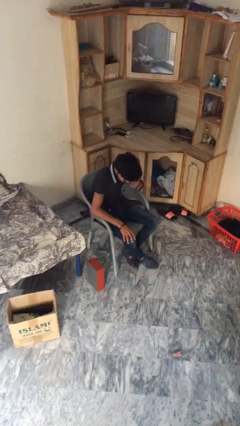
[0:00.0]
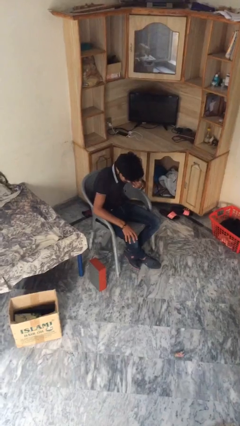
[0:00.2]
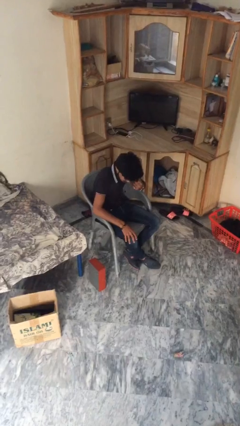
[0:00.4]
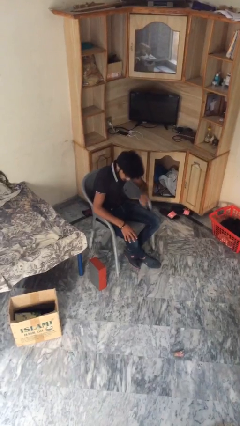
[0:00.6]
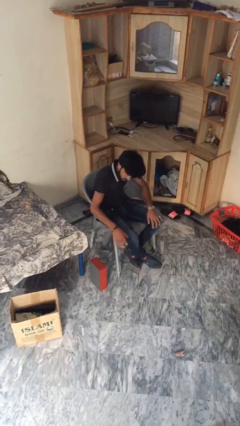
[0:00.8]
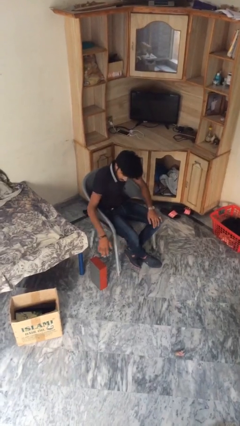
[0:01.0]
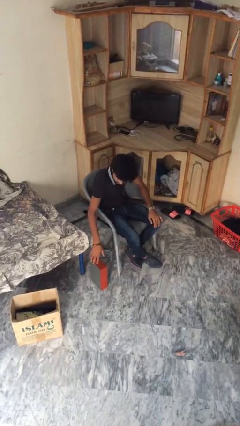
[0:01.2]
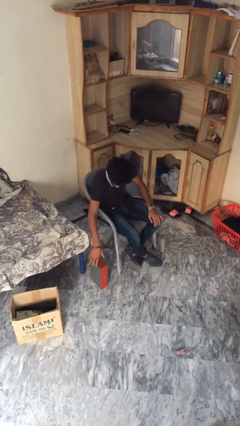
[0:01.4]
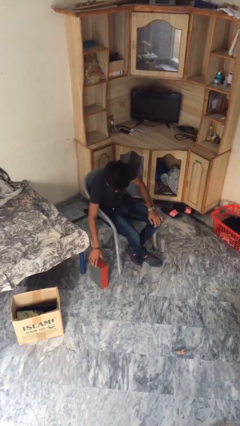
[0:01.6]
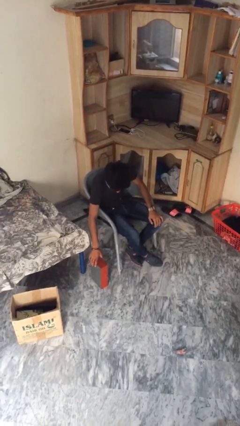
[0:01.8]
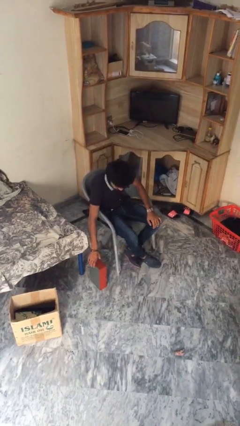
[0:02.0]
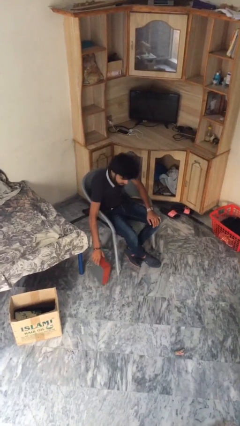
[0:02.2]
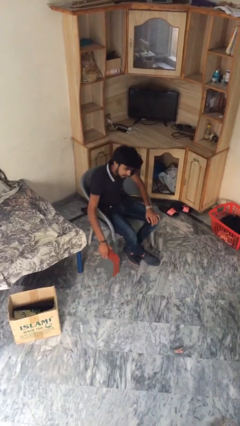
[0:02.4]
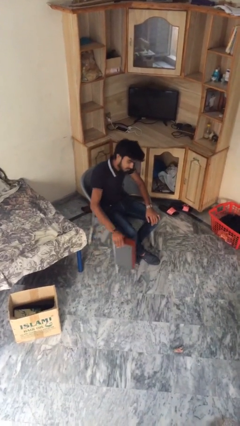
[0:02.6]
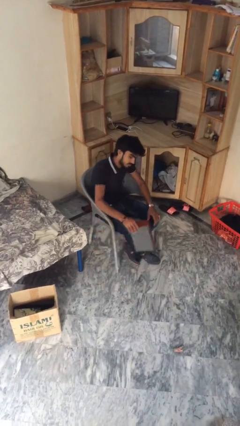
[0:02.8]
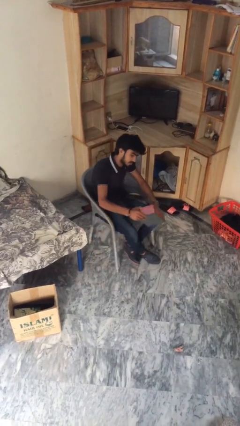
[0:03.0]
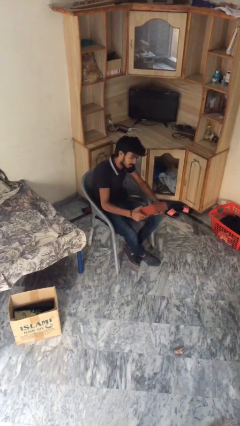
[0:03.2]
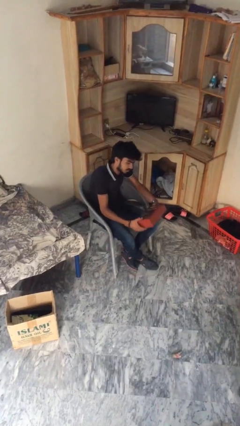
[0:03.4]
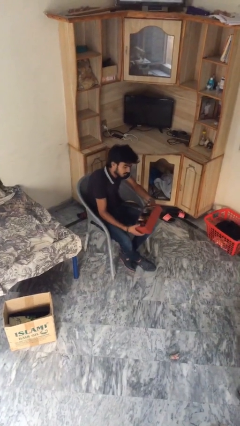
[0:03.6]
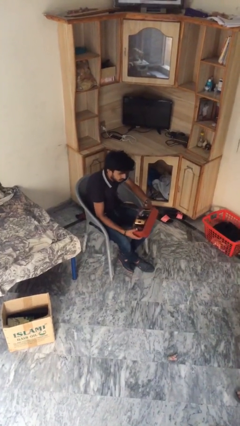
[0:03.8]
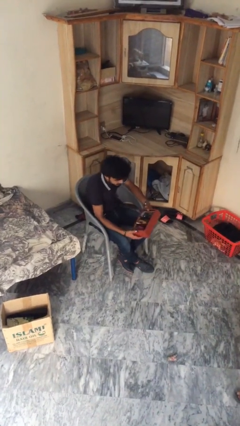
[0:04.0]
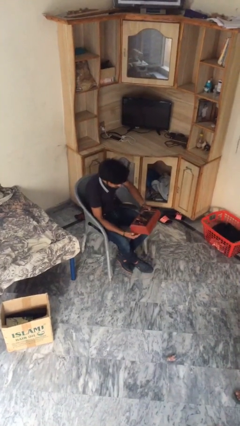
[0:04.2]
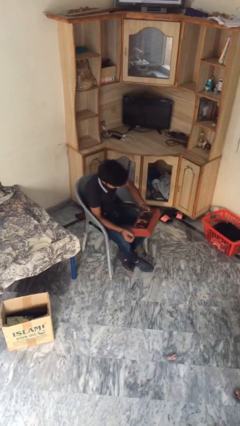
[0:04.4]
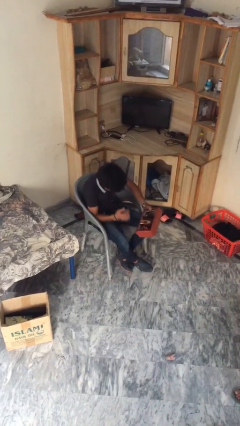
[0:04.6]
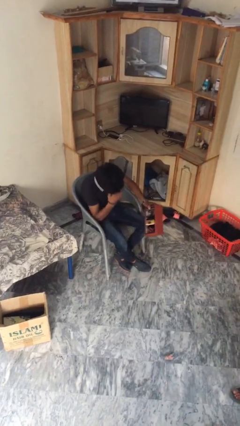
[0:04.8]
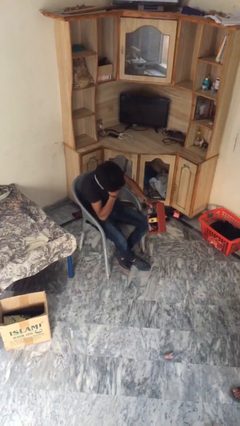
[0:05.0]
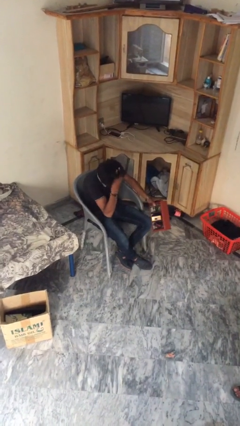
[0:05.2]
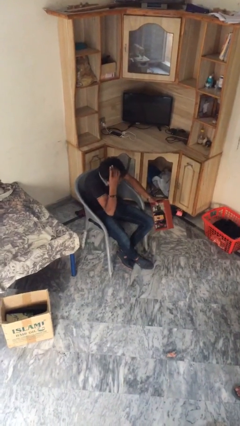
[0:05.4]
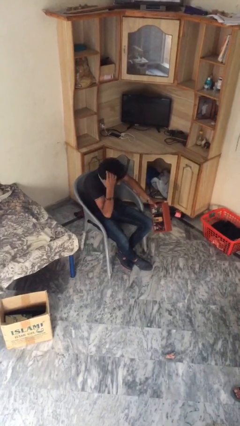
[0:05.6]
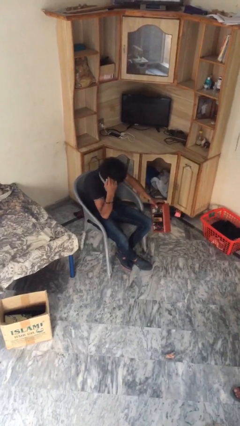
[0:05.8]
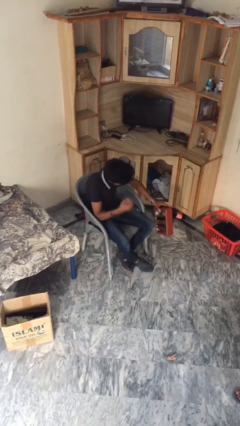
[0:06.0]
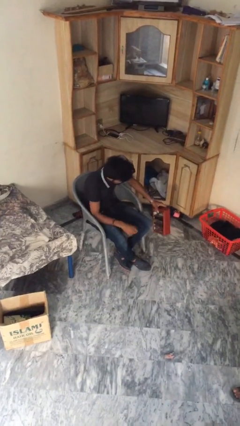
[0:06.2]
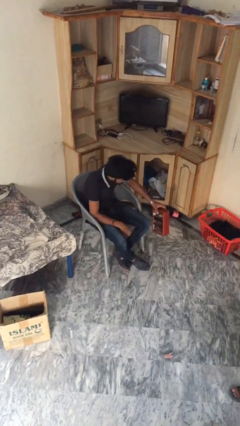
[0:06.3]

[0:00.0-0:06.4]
person picks up object from floor

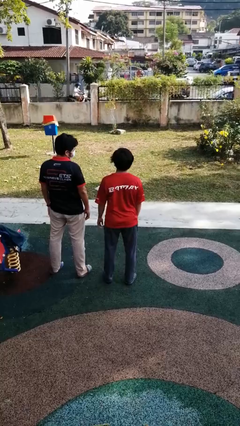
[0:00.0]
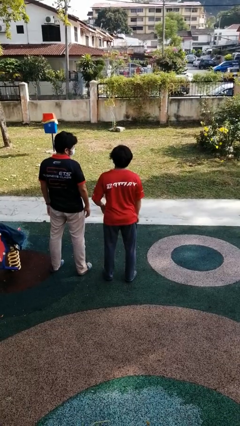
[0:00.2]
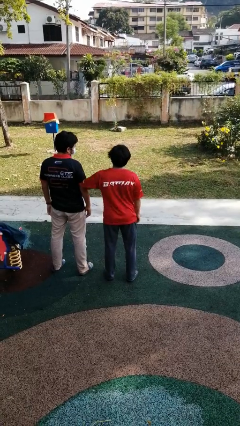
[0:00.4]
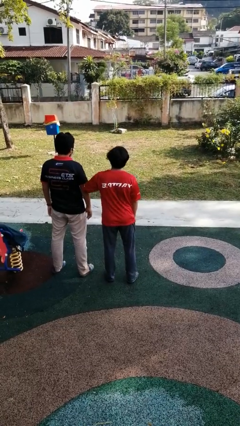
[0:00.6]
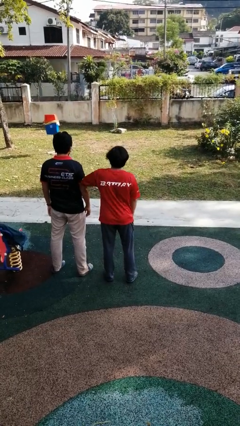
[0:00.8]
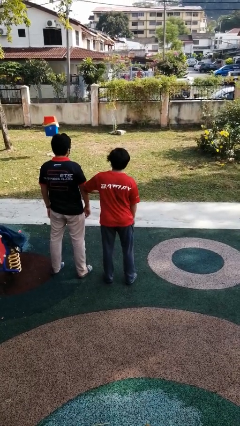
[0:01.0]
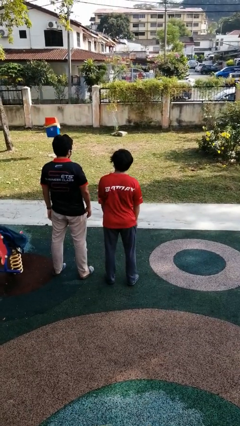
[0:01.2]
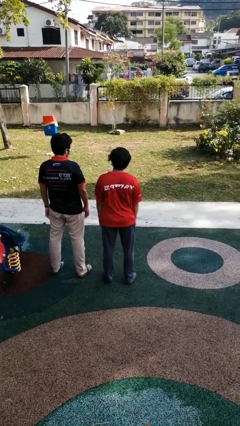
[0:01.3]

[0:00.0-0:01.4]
person nudges person with elbow

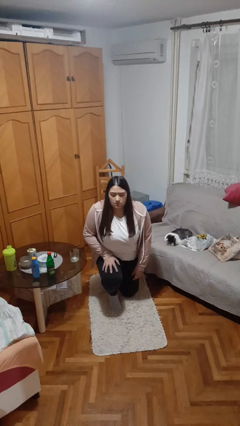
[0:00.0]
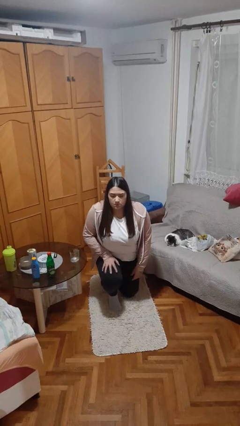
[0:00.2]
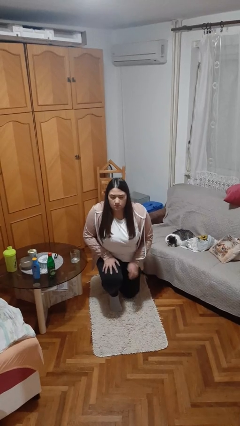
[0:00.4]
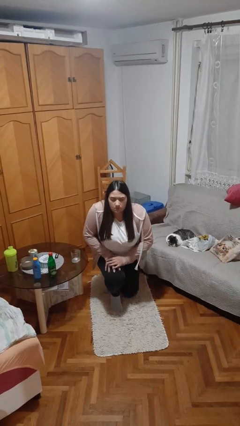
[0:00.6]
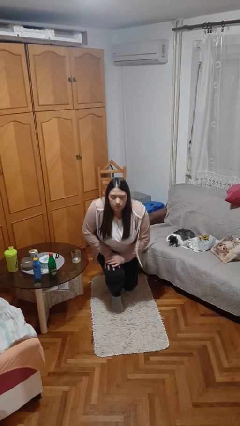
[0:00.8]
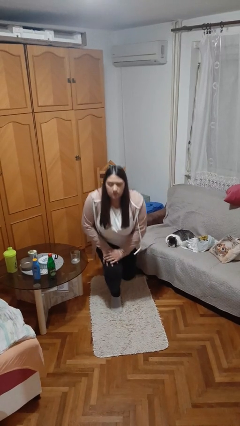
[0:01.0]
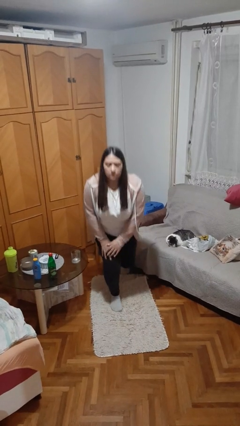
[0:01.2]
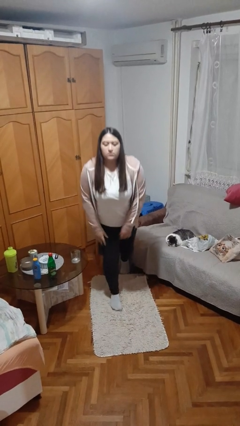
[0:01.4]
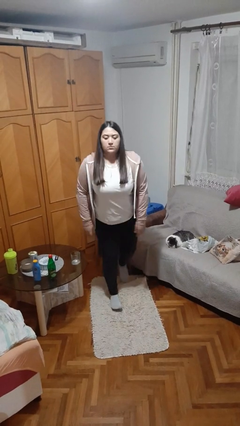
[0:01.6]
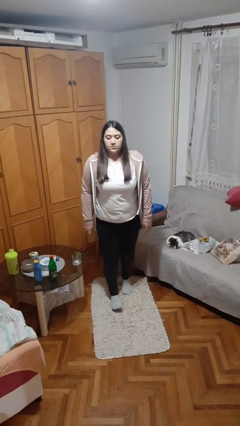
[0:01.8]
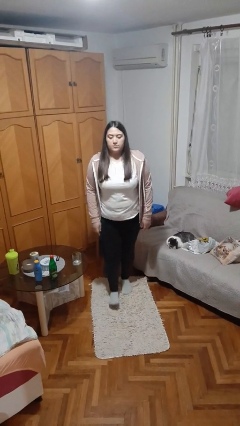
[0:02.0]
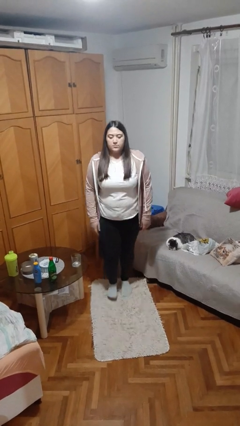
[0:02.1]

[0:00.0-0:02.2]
person stands up from floor

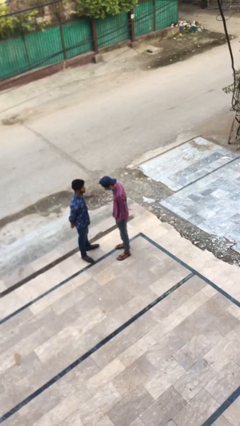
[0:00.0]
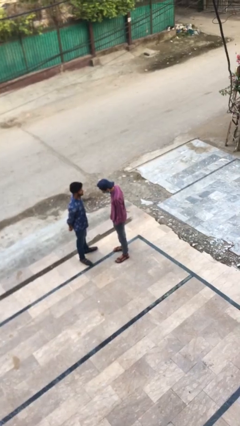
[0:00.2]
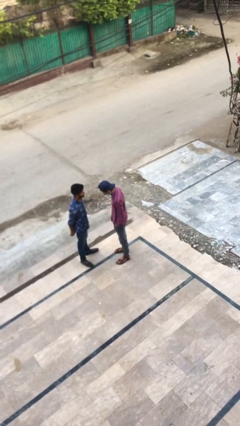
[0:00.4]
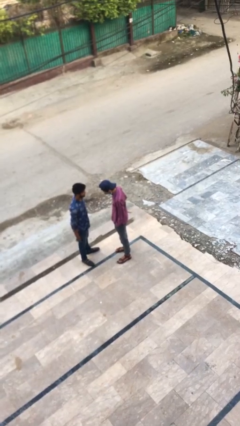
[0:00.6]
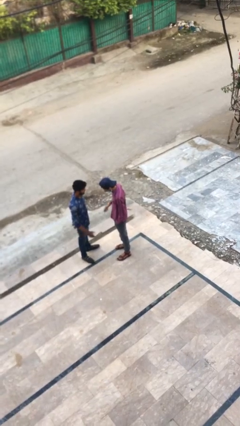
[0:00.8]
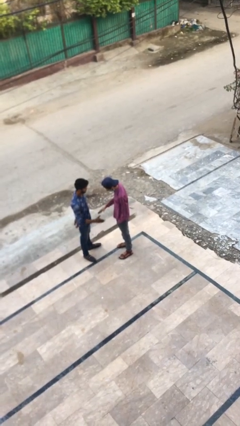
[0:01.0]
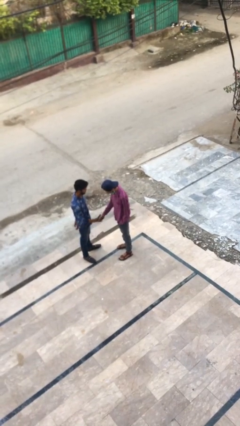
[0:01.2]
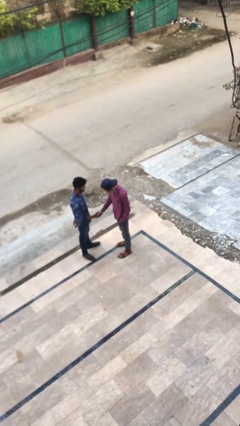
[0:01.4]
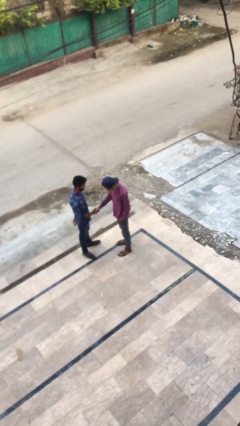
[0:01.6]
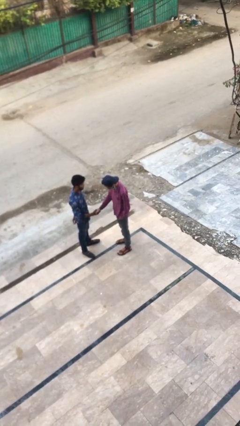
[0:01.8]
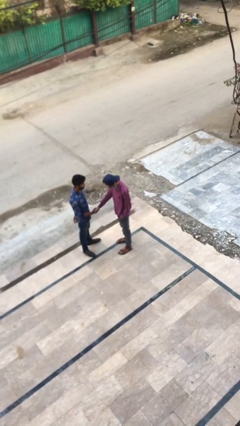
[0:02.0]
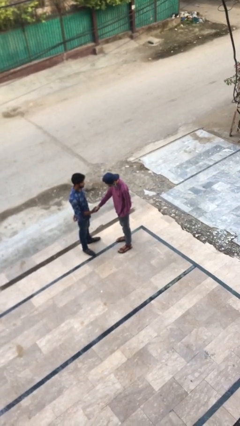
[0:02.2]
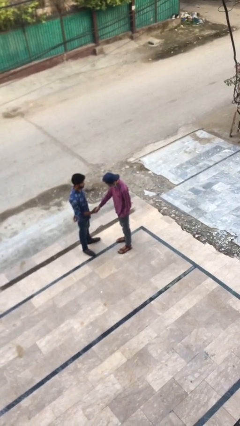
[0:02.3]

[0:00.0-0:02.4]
person shakes hand

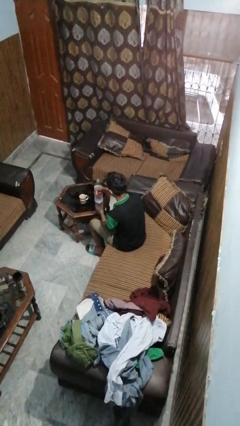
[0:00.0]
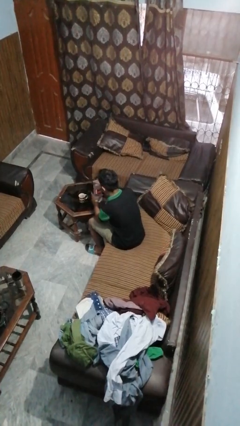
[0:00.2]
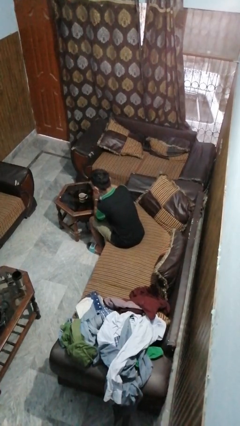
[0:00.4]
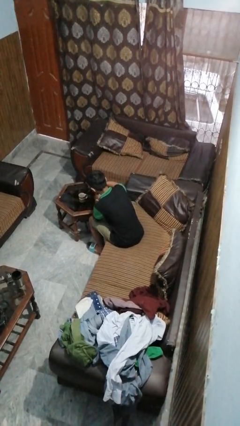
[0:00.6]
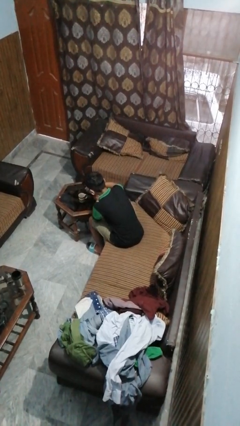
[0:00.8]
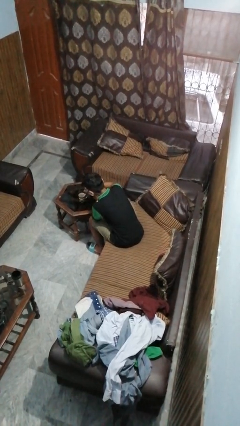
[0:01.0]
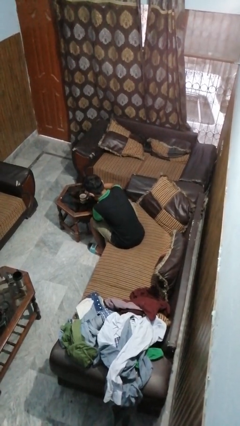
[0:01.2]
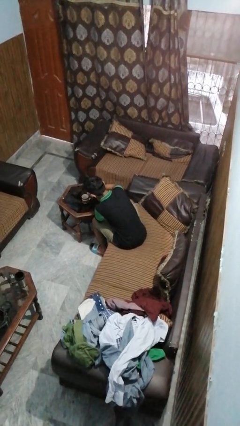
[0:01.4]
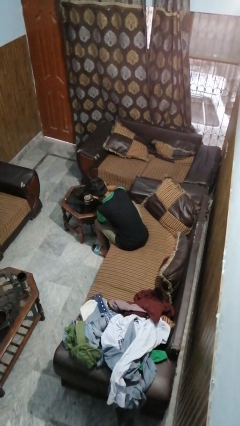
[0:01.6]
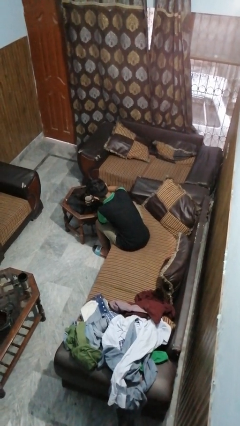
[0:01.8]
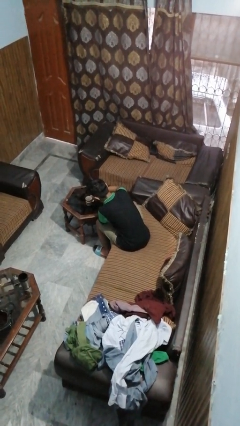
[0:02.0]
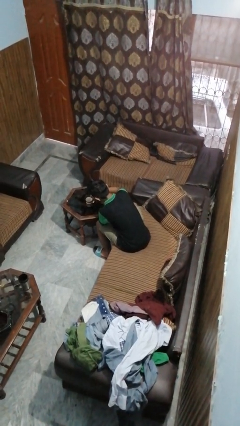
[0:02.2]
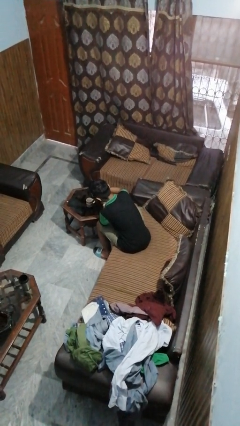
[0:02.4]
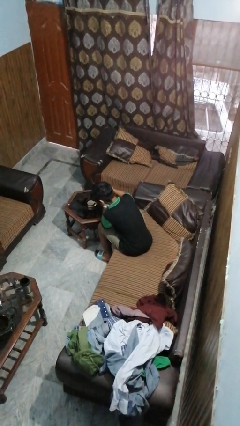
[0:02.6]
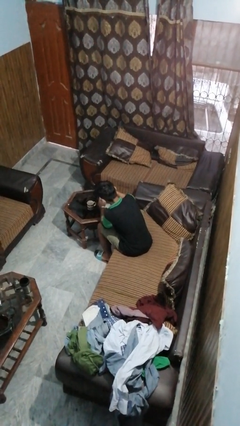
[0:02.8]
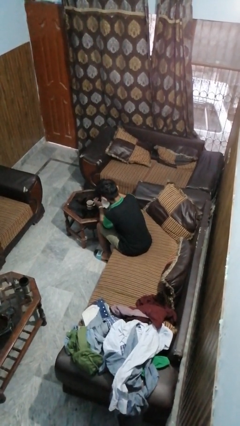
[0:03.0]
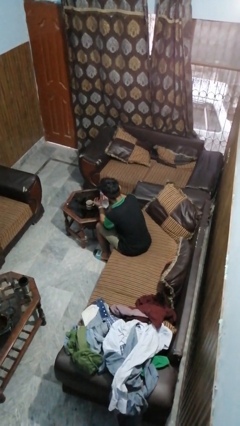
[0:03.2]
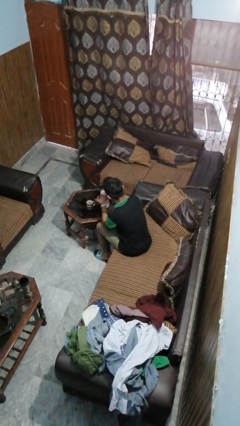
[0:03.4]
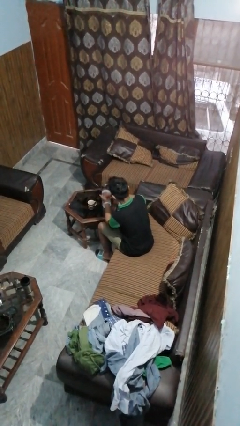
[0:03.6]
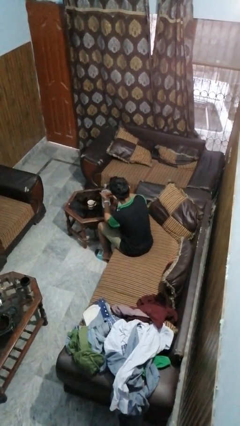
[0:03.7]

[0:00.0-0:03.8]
person pours liquid into cup

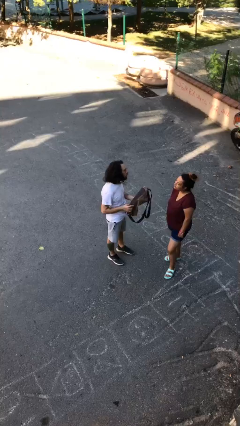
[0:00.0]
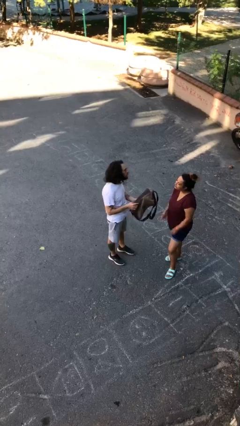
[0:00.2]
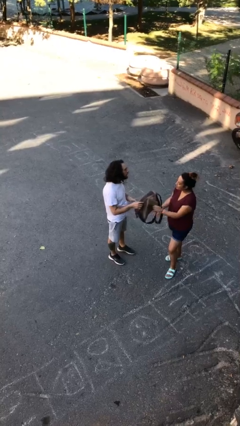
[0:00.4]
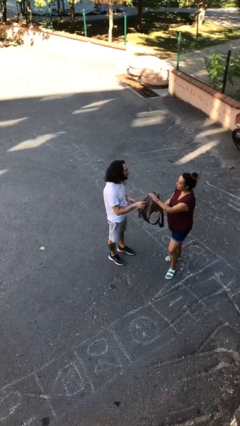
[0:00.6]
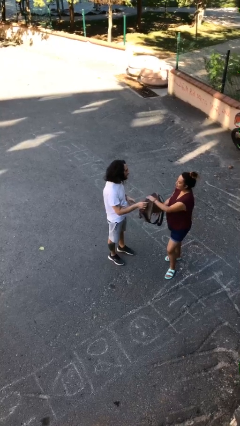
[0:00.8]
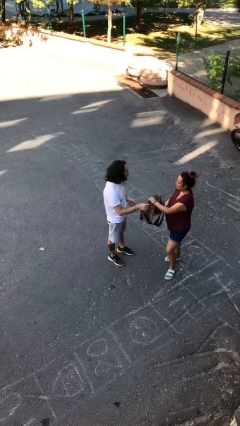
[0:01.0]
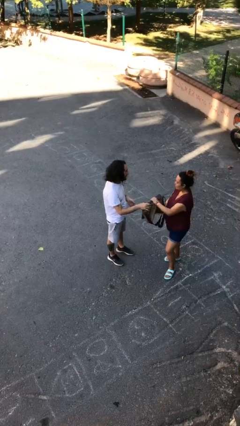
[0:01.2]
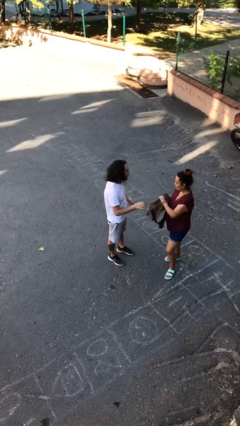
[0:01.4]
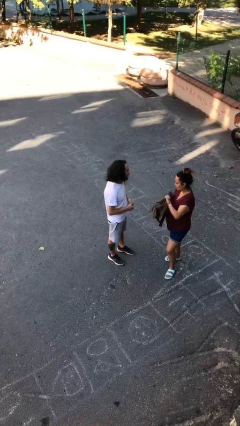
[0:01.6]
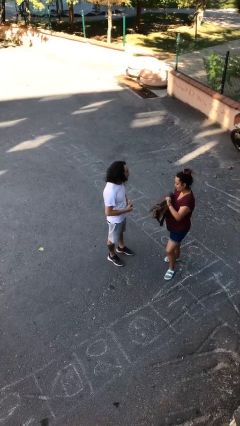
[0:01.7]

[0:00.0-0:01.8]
person transfers object to person
